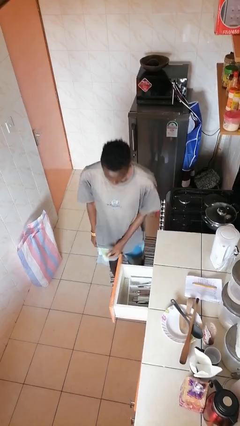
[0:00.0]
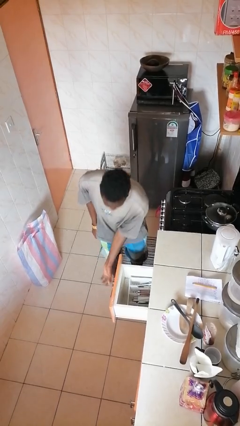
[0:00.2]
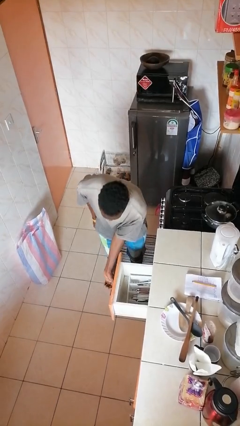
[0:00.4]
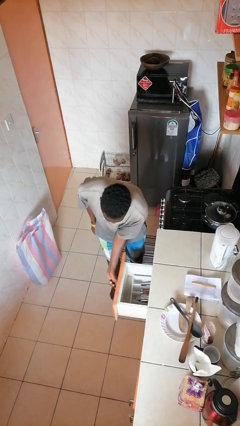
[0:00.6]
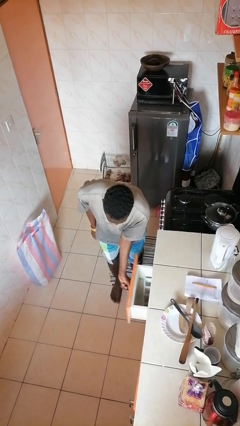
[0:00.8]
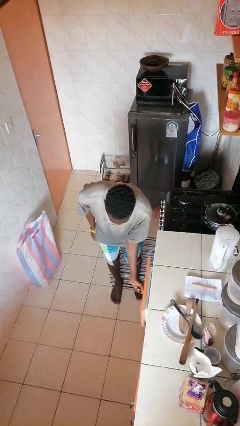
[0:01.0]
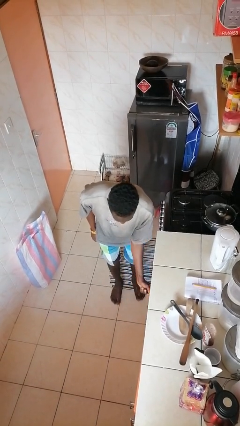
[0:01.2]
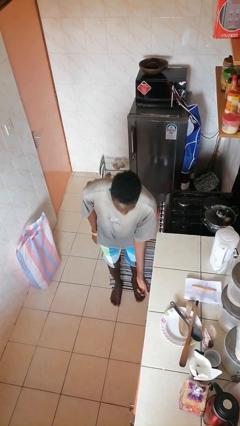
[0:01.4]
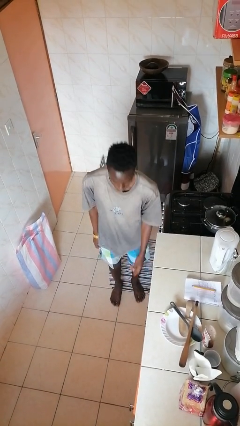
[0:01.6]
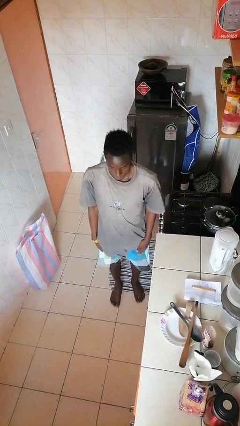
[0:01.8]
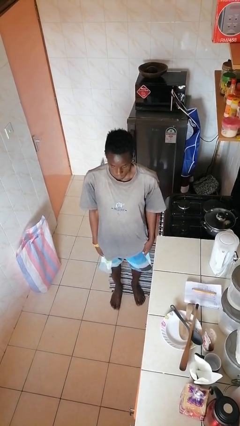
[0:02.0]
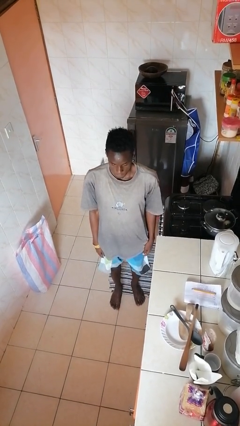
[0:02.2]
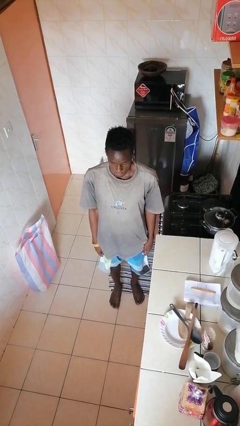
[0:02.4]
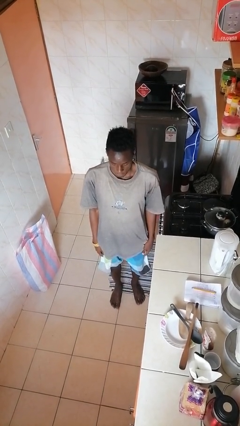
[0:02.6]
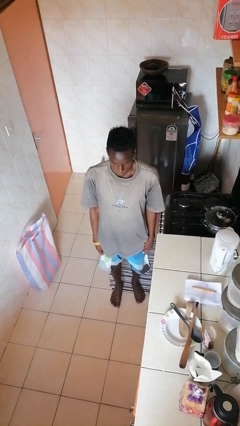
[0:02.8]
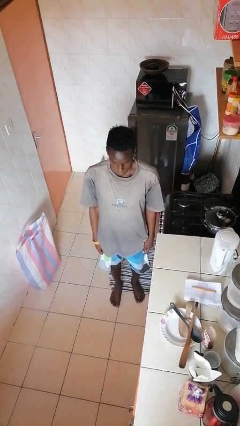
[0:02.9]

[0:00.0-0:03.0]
person closes kitchen drawer

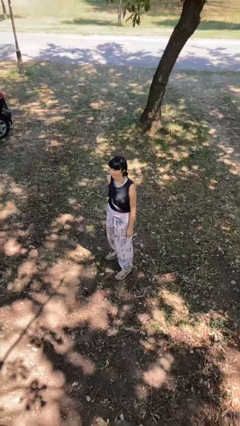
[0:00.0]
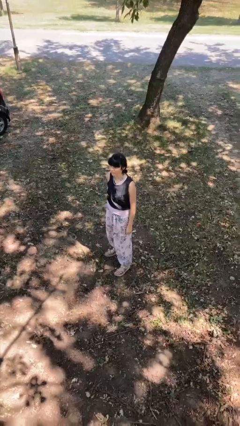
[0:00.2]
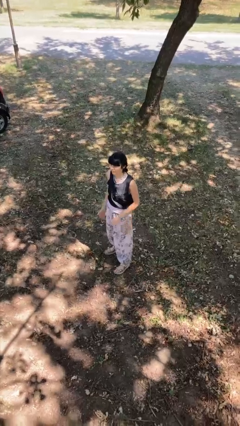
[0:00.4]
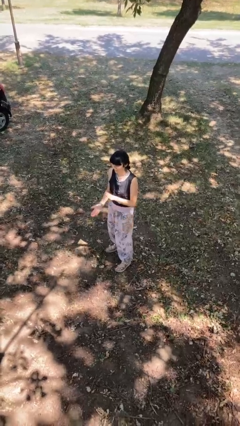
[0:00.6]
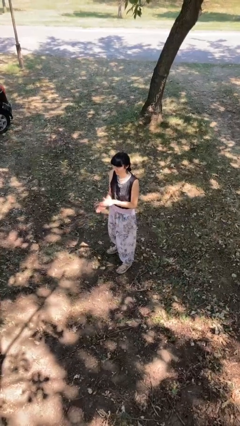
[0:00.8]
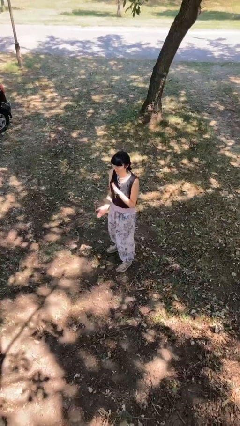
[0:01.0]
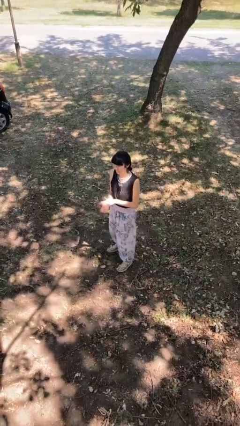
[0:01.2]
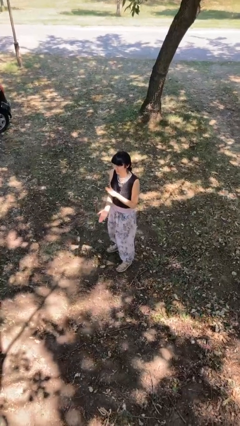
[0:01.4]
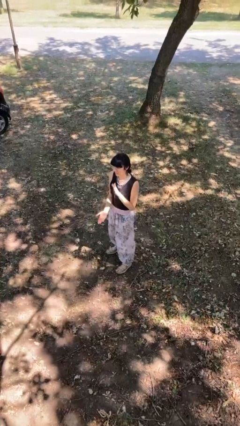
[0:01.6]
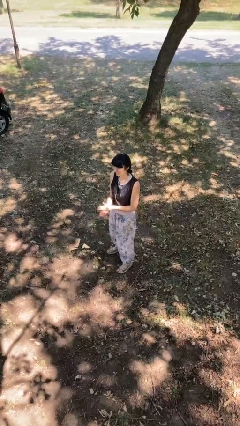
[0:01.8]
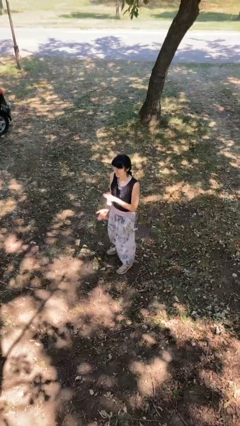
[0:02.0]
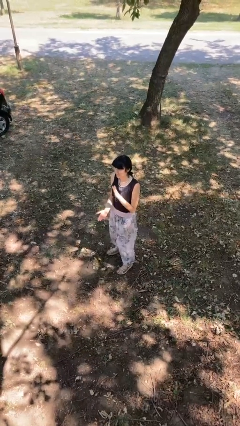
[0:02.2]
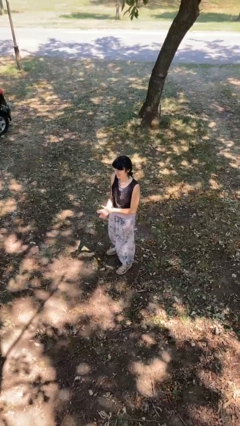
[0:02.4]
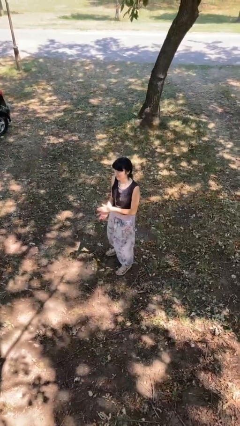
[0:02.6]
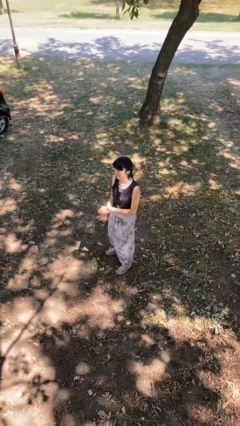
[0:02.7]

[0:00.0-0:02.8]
person claps hands

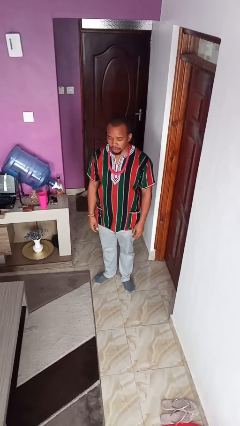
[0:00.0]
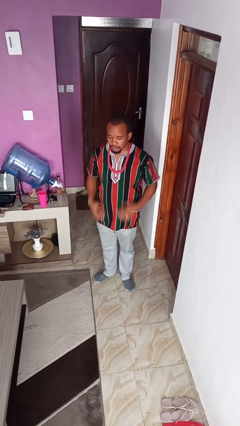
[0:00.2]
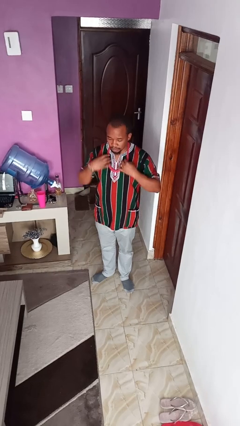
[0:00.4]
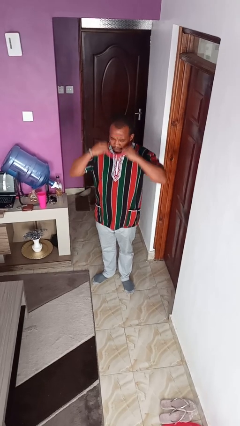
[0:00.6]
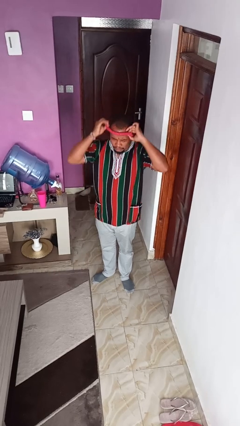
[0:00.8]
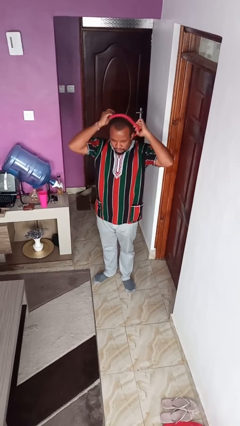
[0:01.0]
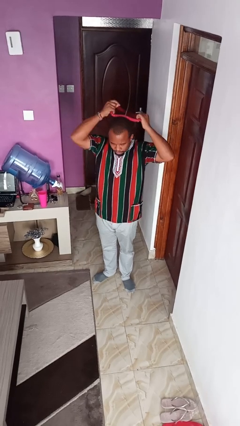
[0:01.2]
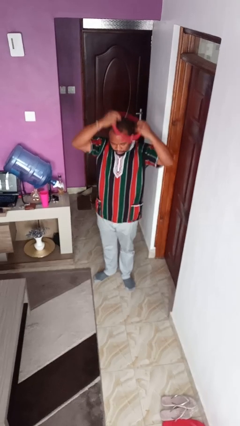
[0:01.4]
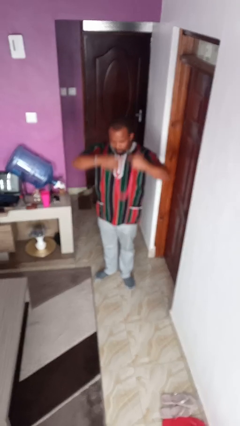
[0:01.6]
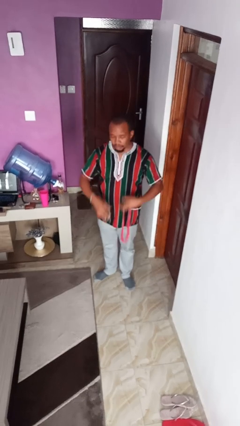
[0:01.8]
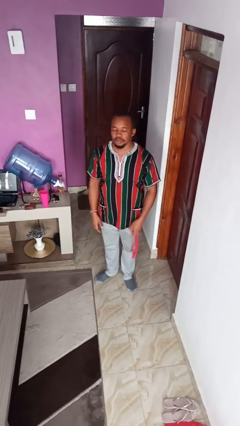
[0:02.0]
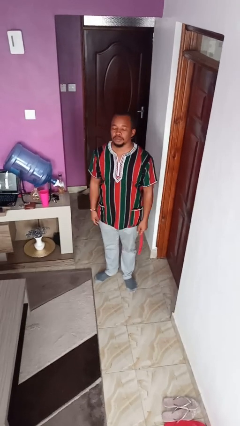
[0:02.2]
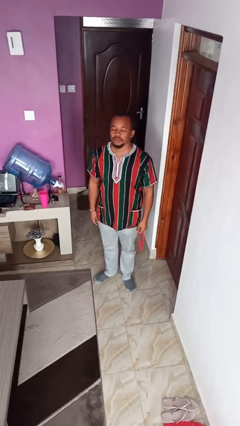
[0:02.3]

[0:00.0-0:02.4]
person takes off necklace

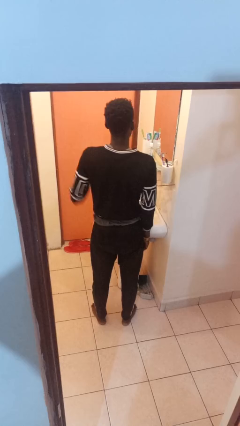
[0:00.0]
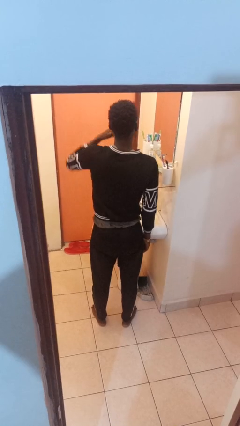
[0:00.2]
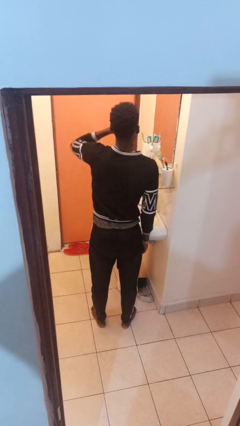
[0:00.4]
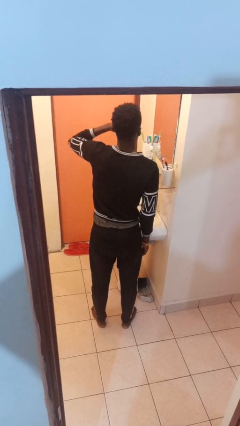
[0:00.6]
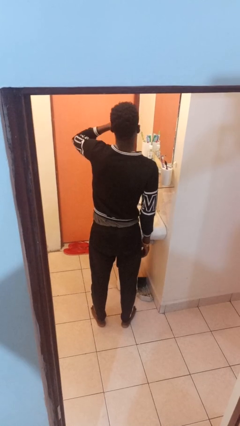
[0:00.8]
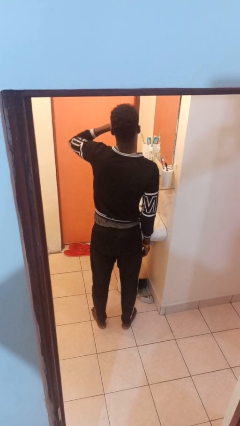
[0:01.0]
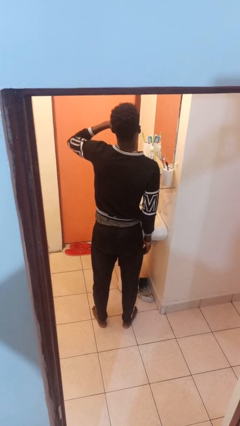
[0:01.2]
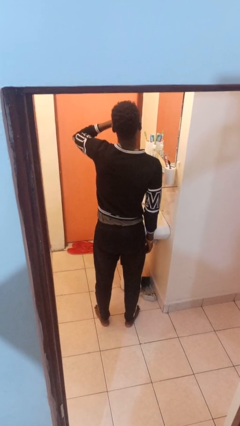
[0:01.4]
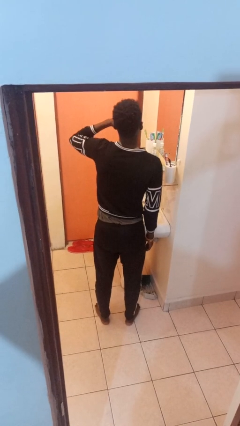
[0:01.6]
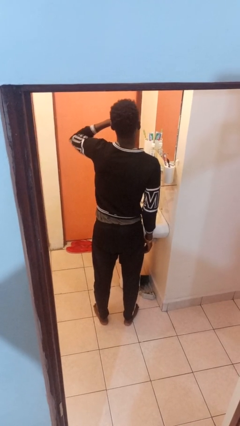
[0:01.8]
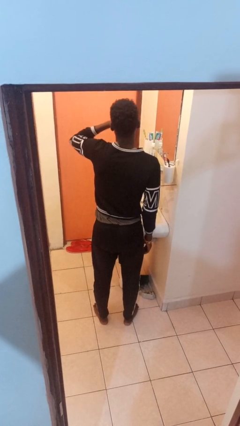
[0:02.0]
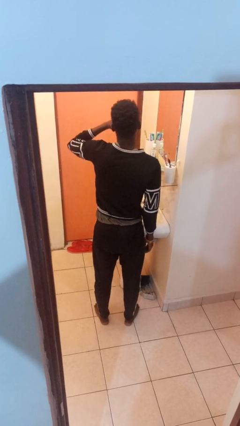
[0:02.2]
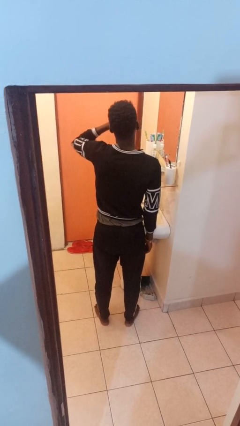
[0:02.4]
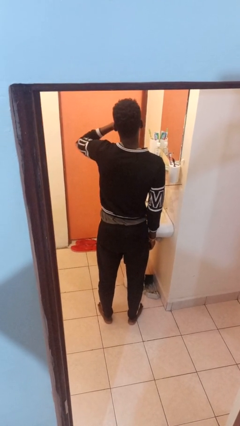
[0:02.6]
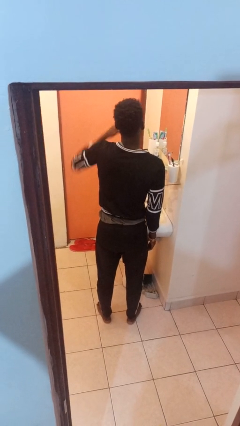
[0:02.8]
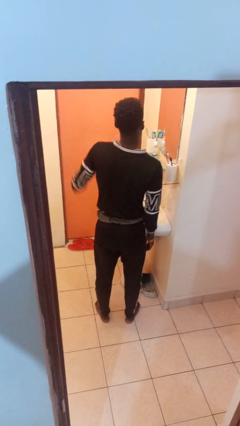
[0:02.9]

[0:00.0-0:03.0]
person brushes teeth

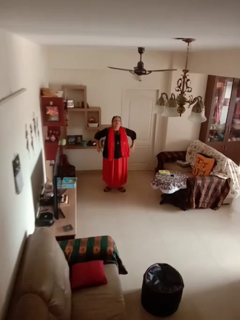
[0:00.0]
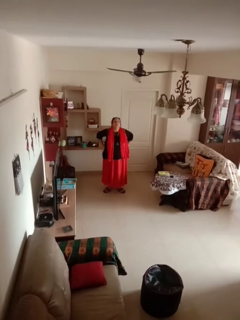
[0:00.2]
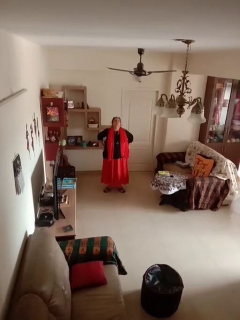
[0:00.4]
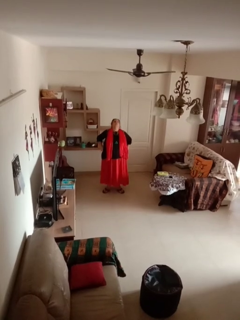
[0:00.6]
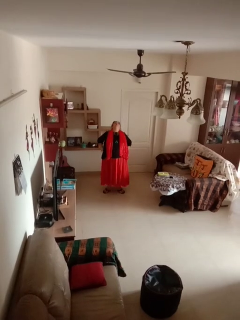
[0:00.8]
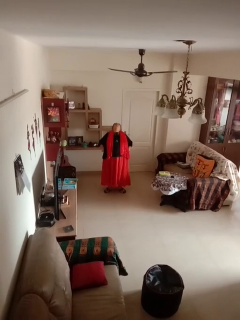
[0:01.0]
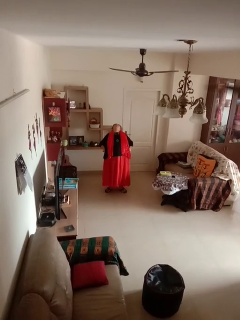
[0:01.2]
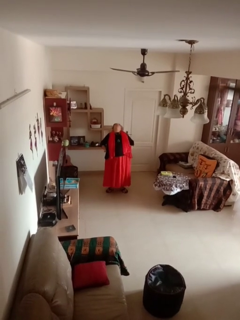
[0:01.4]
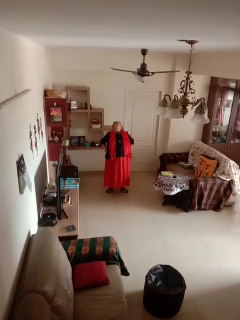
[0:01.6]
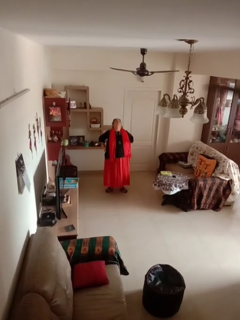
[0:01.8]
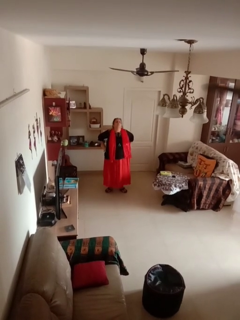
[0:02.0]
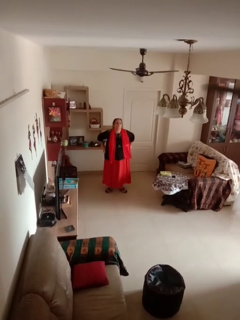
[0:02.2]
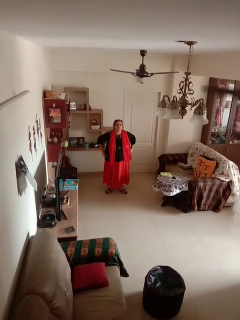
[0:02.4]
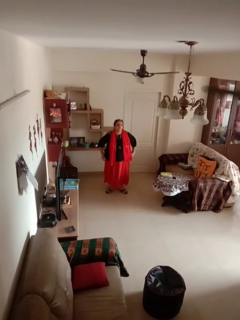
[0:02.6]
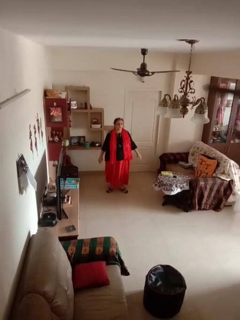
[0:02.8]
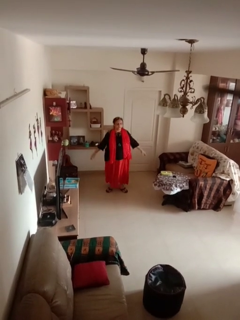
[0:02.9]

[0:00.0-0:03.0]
person stretches back

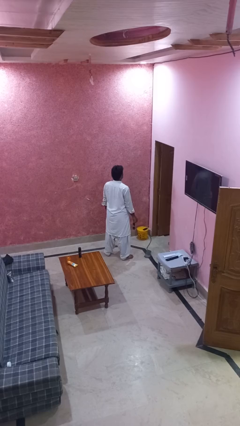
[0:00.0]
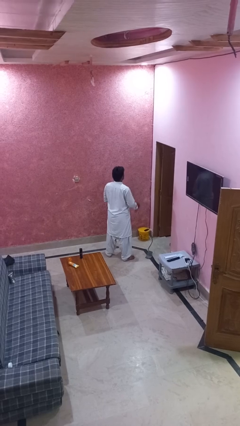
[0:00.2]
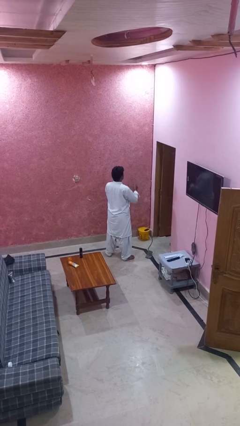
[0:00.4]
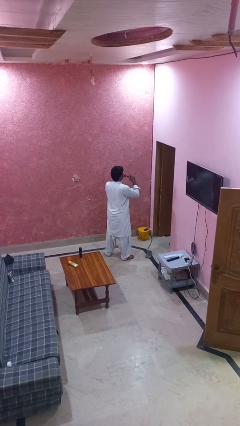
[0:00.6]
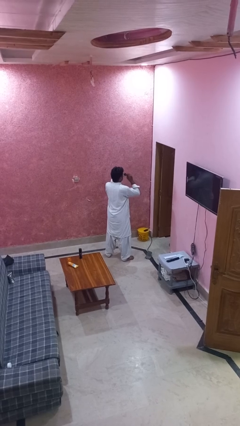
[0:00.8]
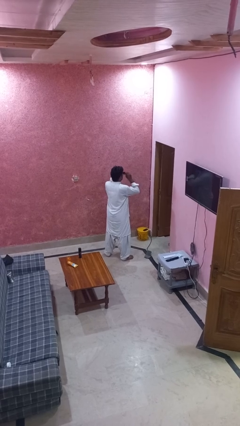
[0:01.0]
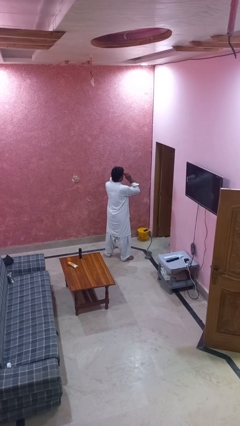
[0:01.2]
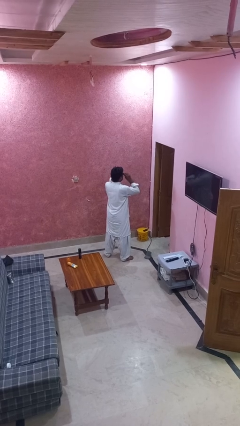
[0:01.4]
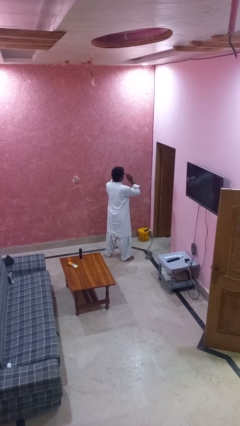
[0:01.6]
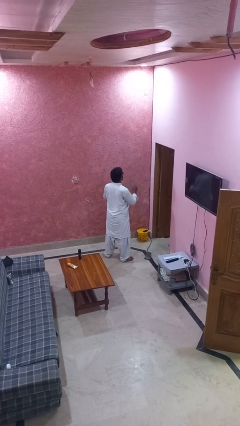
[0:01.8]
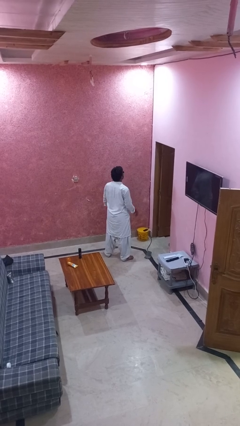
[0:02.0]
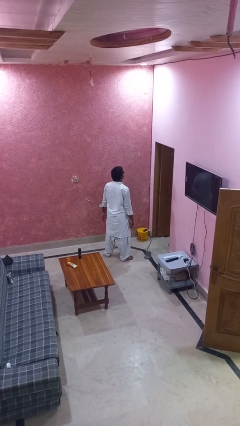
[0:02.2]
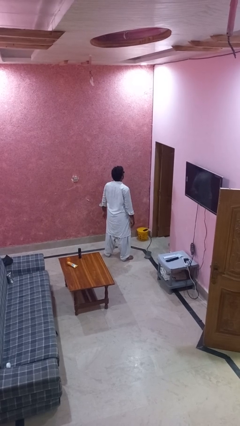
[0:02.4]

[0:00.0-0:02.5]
person puts on sunglasses

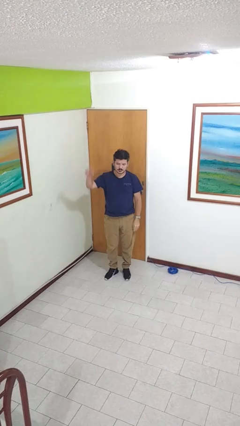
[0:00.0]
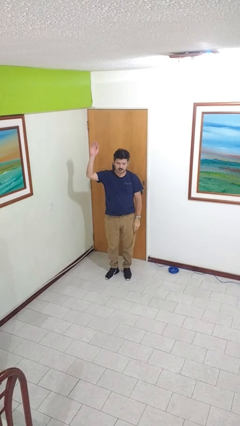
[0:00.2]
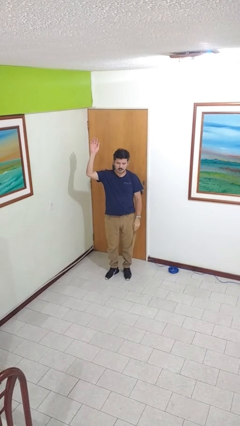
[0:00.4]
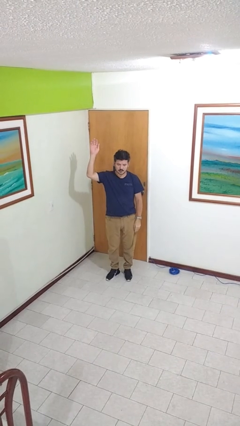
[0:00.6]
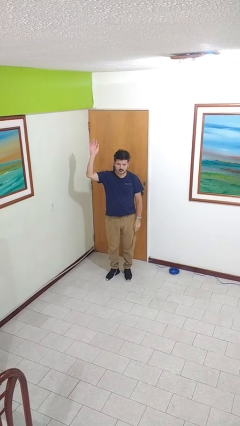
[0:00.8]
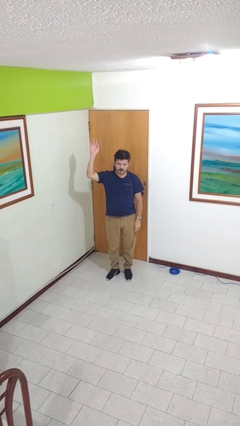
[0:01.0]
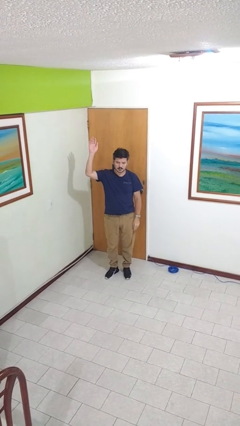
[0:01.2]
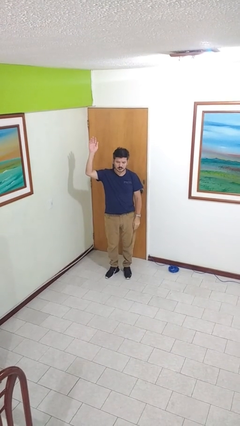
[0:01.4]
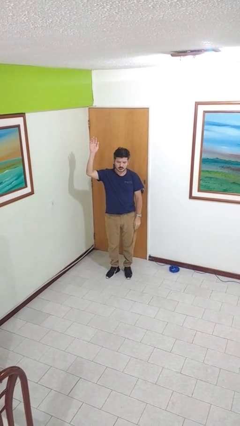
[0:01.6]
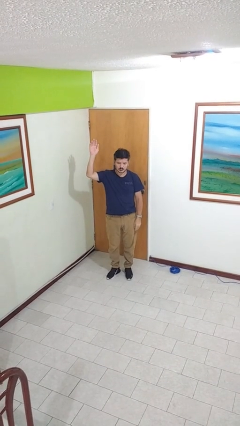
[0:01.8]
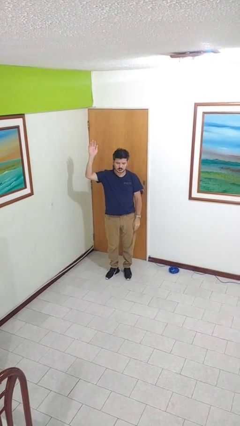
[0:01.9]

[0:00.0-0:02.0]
person gestures raise hand
